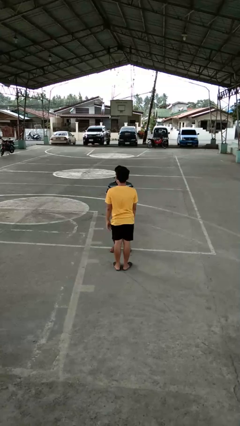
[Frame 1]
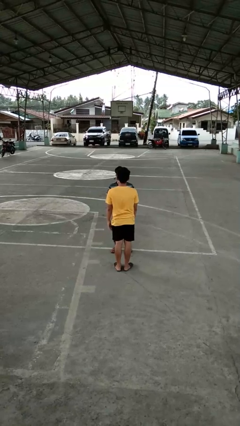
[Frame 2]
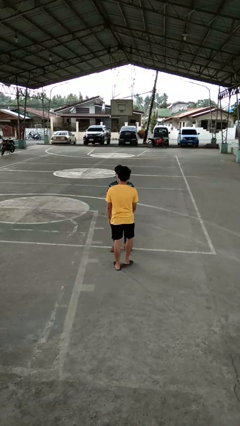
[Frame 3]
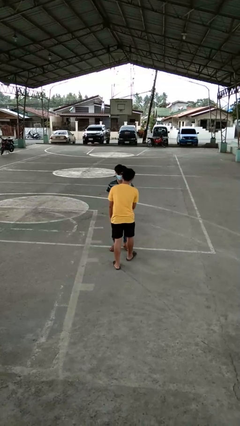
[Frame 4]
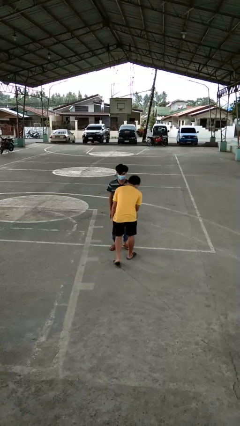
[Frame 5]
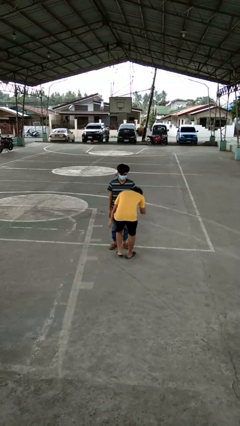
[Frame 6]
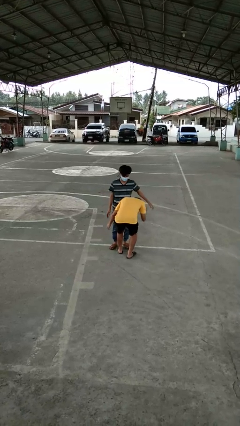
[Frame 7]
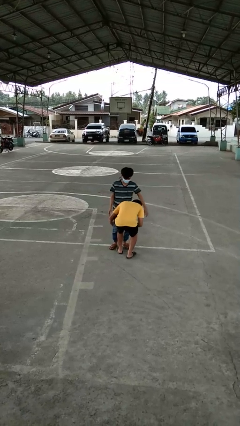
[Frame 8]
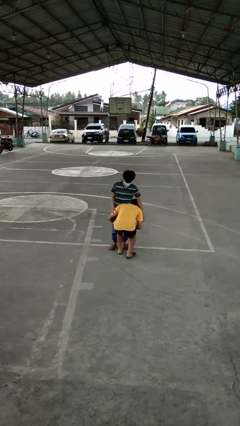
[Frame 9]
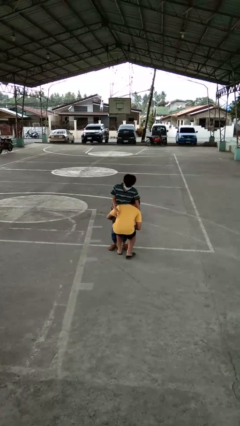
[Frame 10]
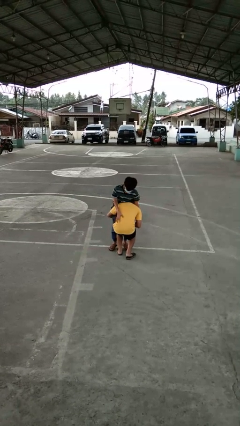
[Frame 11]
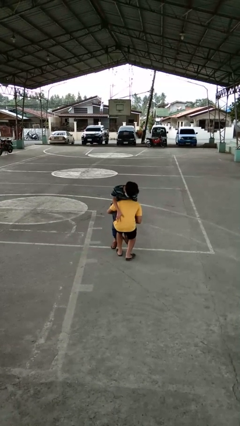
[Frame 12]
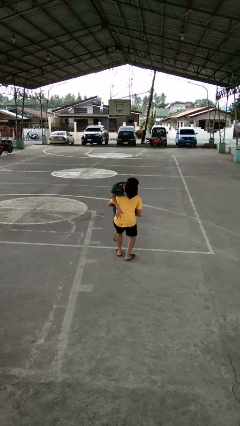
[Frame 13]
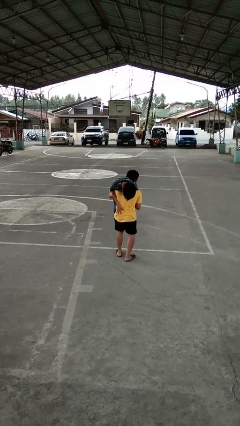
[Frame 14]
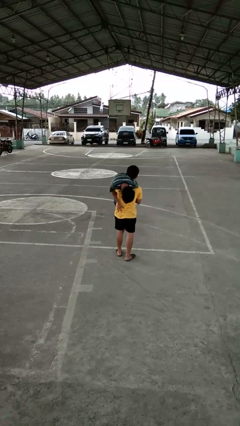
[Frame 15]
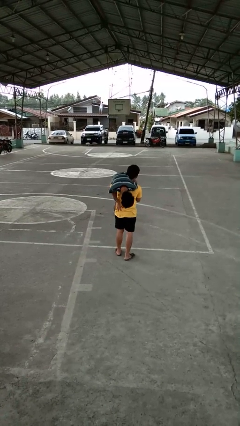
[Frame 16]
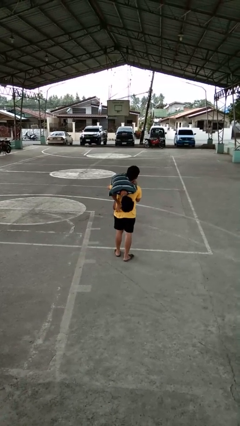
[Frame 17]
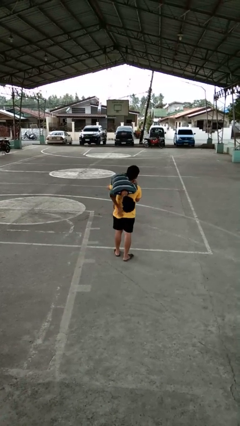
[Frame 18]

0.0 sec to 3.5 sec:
person carries person over shoulder

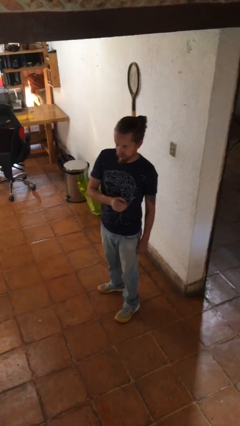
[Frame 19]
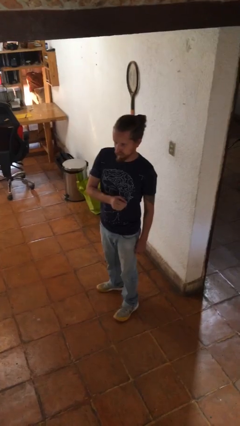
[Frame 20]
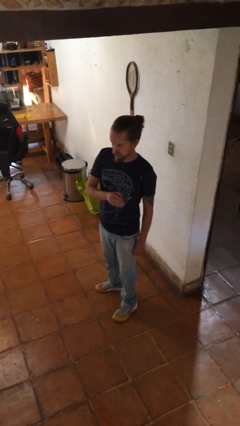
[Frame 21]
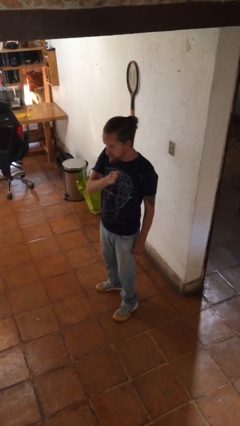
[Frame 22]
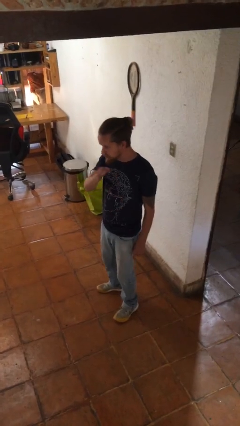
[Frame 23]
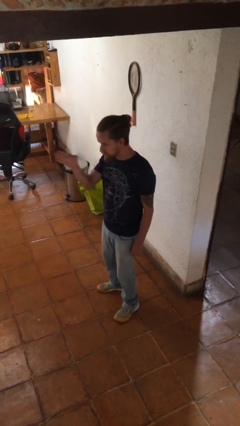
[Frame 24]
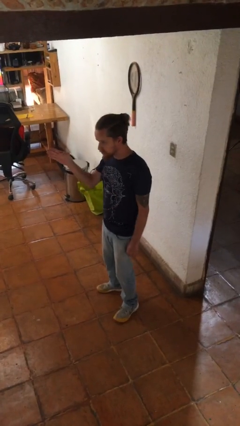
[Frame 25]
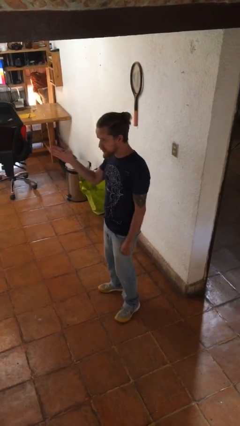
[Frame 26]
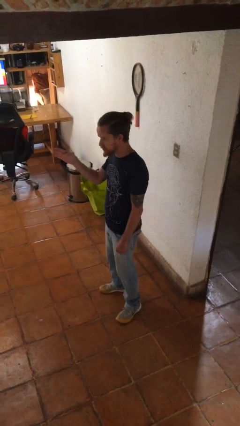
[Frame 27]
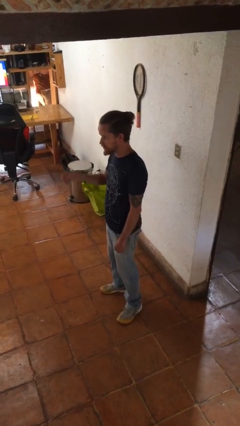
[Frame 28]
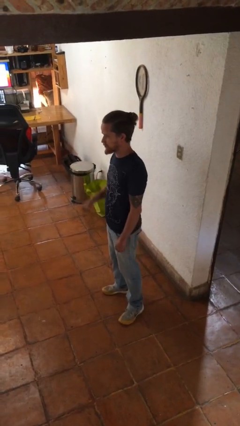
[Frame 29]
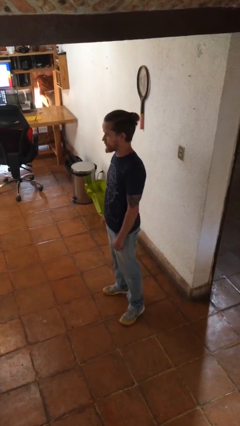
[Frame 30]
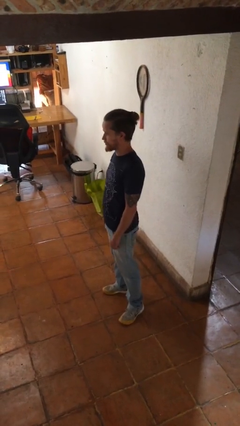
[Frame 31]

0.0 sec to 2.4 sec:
person gestures swipe right

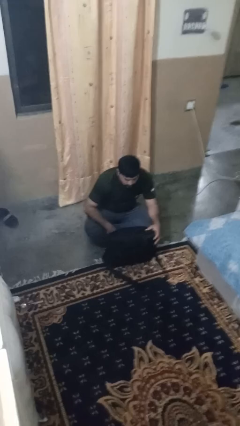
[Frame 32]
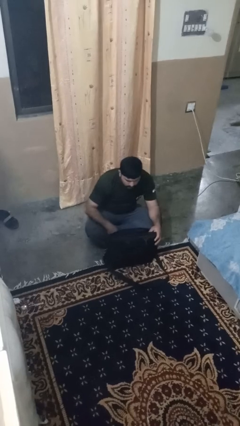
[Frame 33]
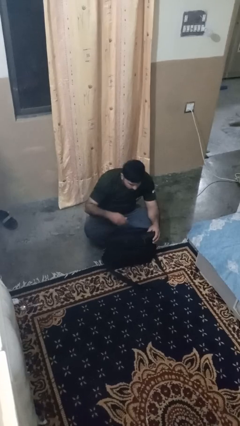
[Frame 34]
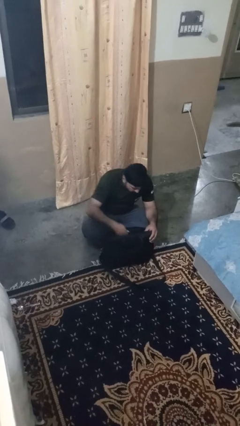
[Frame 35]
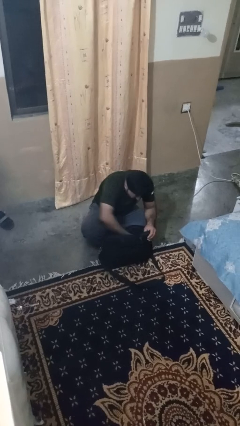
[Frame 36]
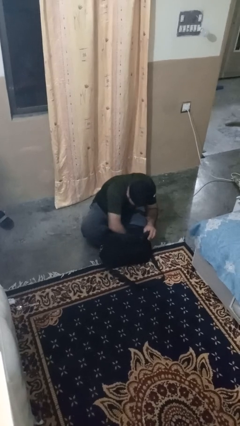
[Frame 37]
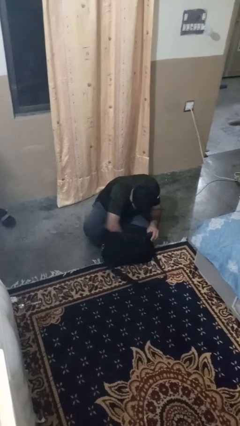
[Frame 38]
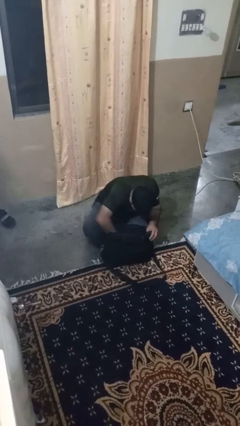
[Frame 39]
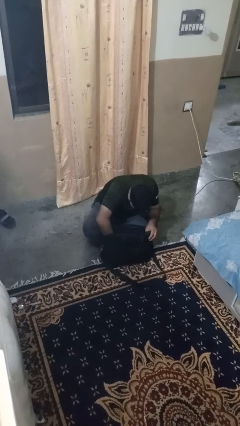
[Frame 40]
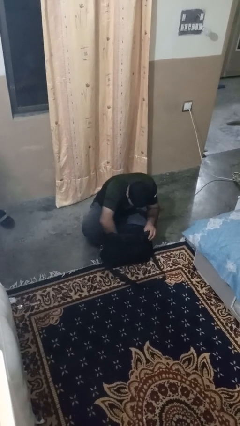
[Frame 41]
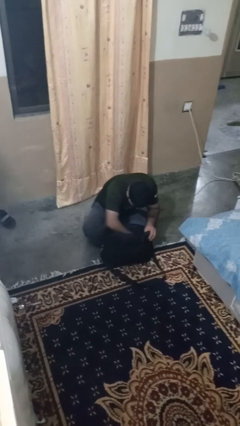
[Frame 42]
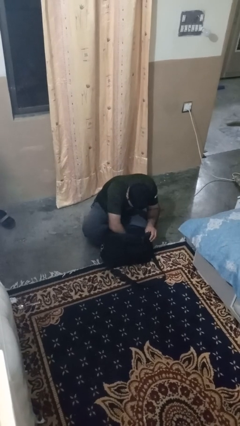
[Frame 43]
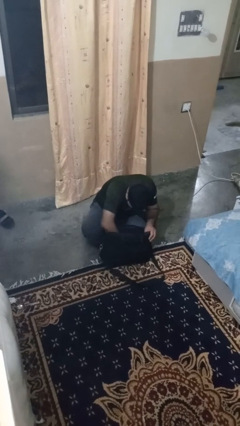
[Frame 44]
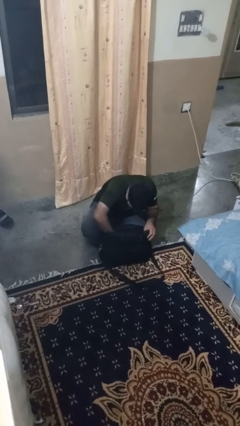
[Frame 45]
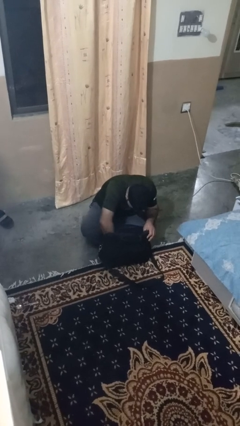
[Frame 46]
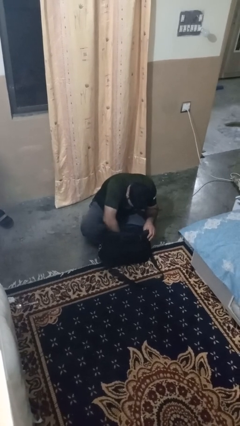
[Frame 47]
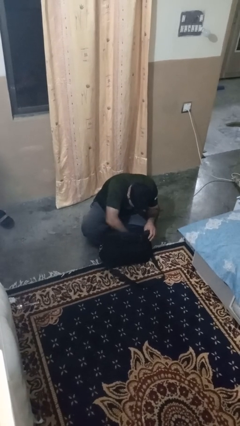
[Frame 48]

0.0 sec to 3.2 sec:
person searches in bag

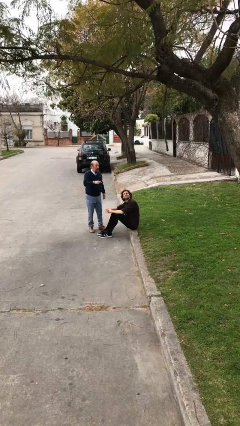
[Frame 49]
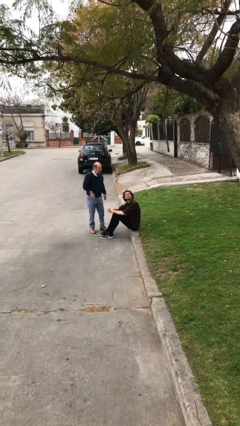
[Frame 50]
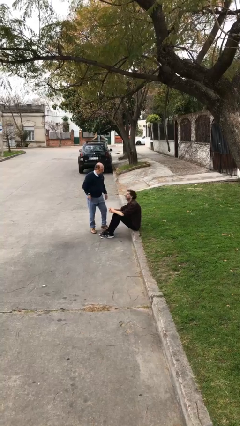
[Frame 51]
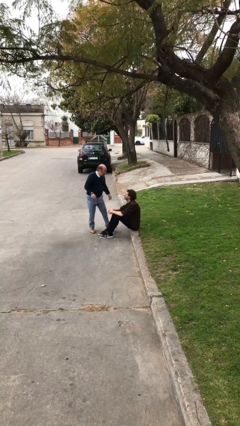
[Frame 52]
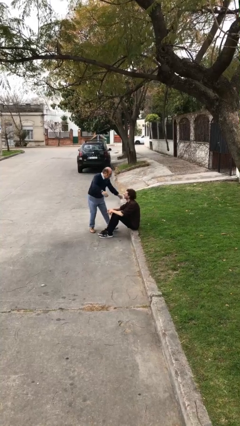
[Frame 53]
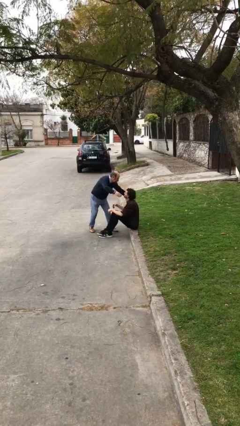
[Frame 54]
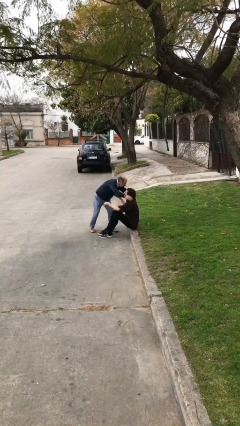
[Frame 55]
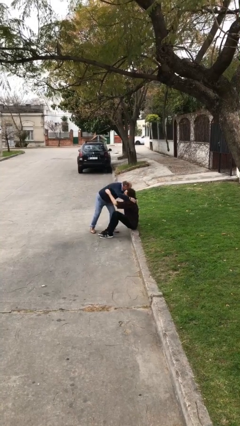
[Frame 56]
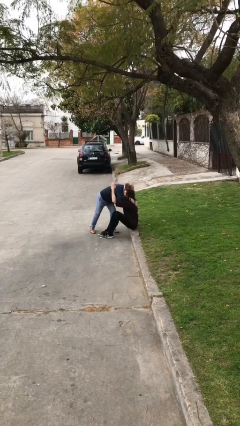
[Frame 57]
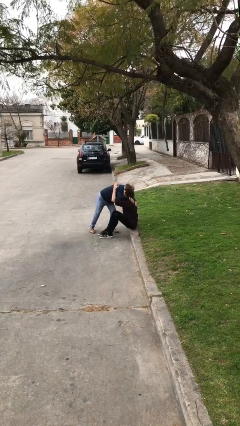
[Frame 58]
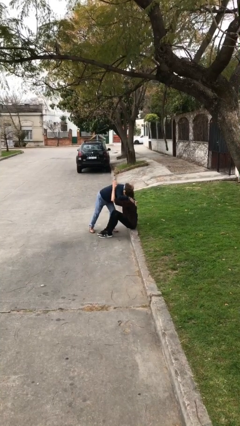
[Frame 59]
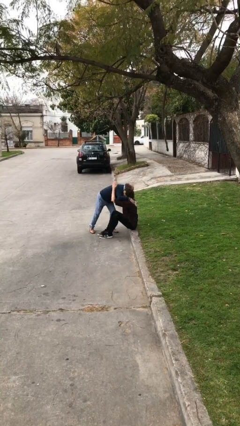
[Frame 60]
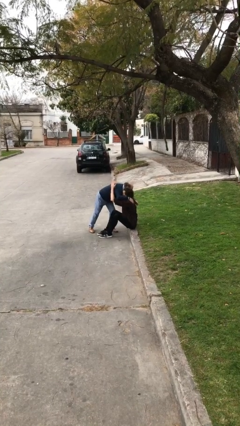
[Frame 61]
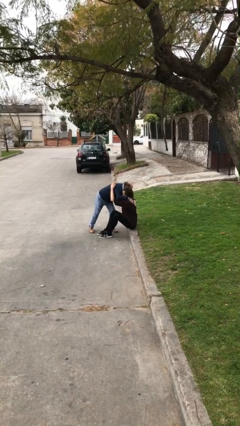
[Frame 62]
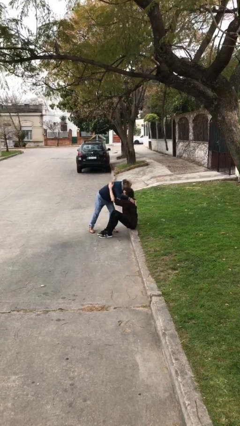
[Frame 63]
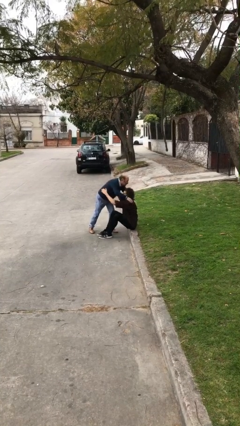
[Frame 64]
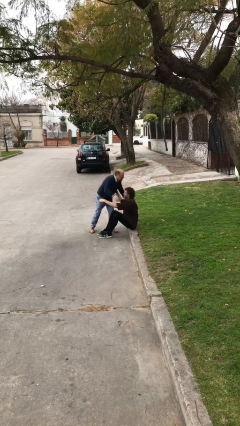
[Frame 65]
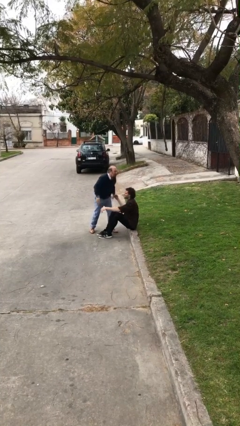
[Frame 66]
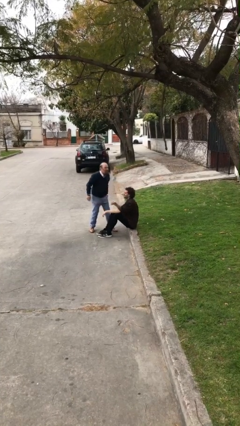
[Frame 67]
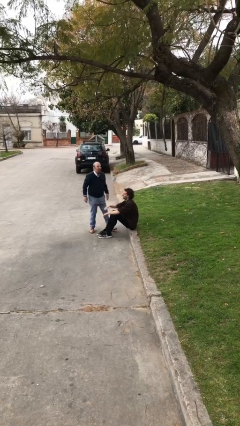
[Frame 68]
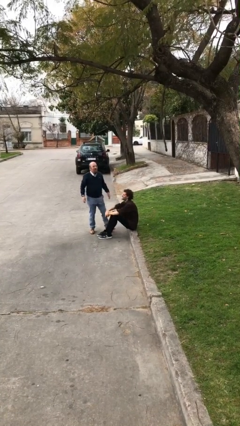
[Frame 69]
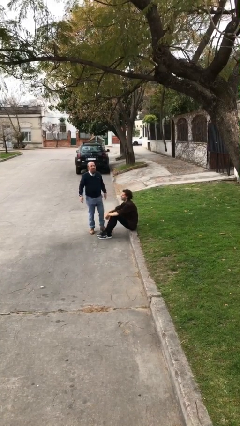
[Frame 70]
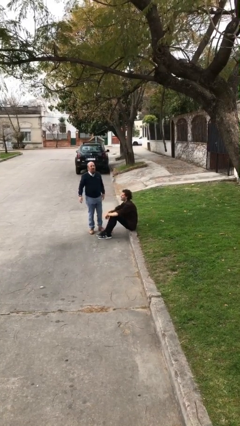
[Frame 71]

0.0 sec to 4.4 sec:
person embraces person

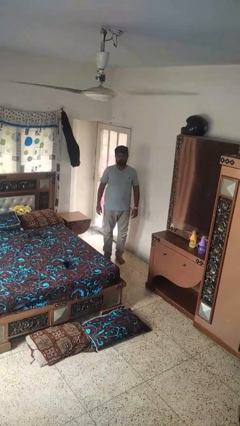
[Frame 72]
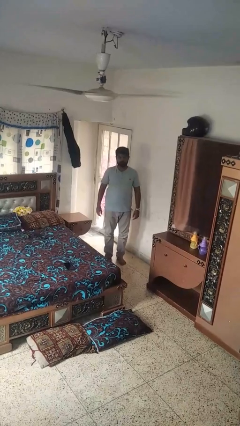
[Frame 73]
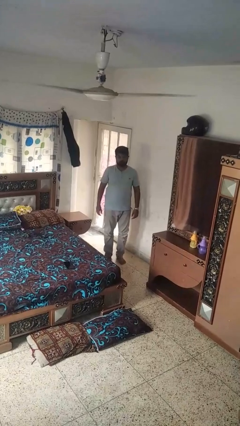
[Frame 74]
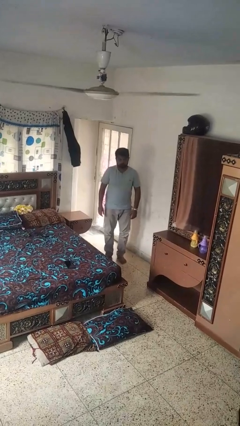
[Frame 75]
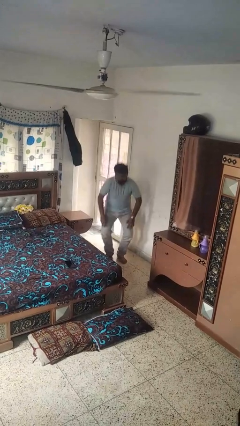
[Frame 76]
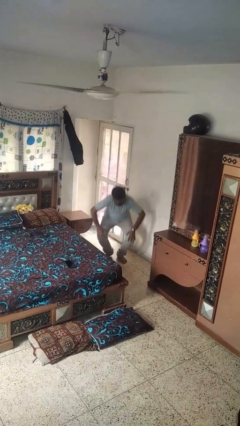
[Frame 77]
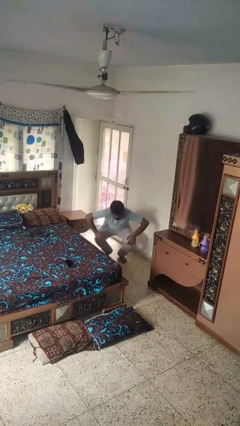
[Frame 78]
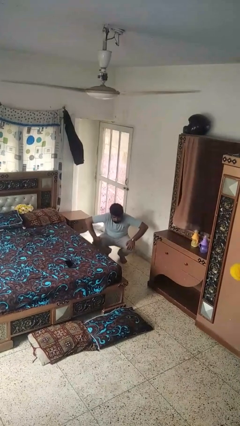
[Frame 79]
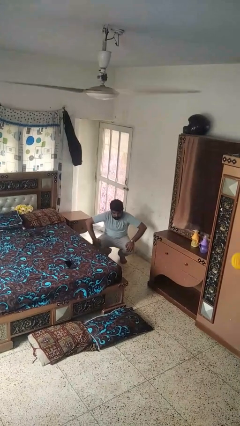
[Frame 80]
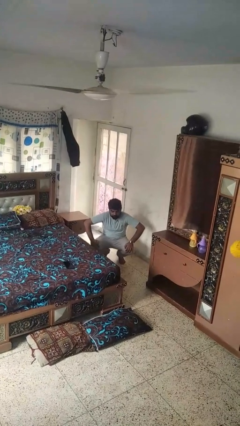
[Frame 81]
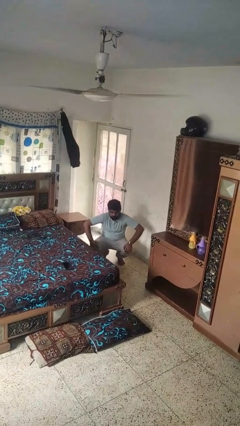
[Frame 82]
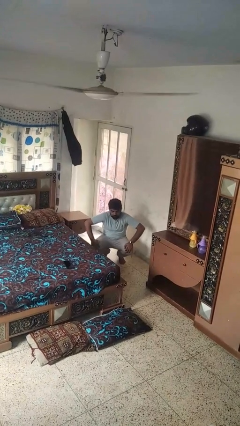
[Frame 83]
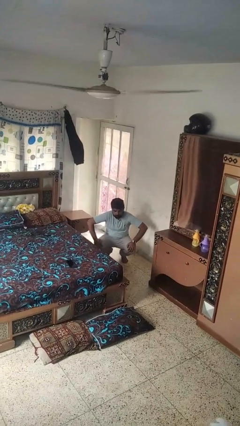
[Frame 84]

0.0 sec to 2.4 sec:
person squats

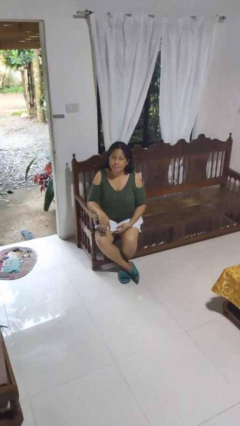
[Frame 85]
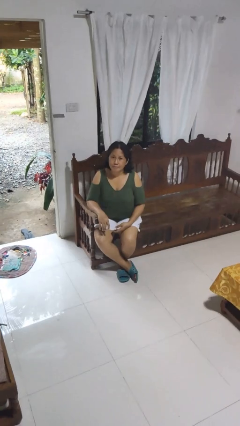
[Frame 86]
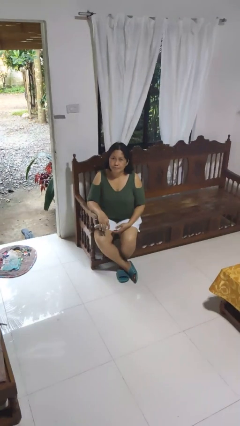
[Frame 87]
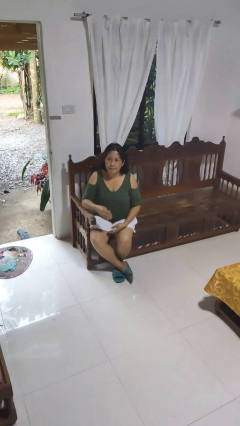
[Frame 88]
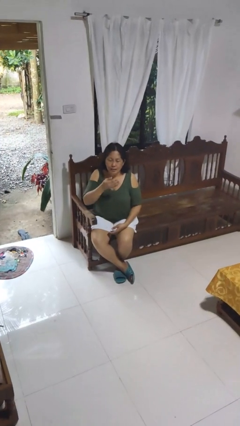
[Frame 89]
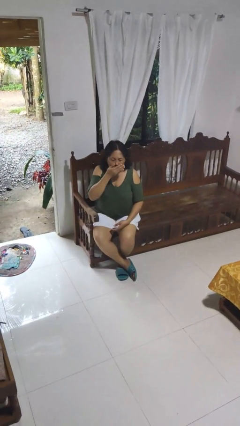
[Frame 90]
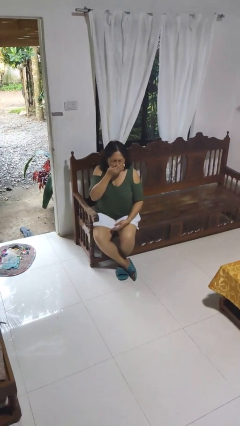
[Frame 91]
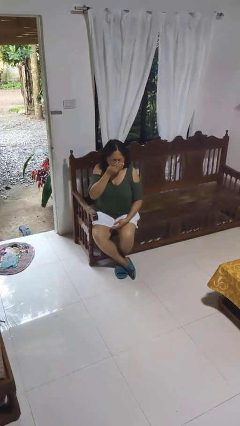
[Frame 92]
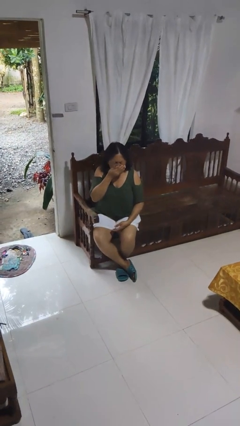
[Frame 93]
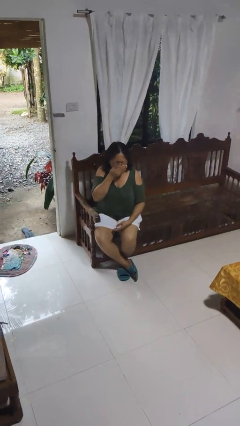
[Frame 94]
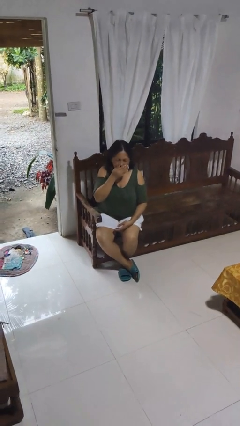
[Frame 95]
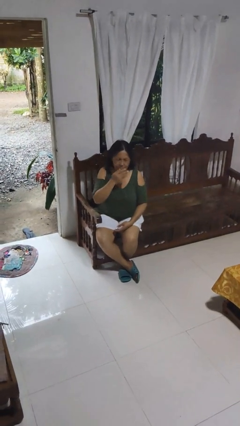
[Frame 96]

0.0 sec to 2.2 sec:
person sneezes into hand
